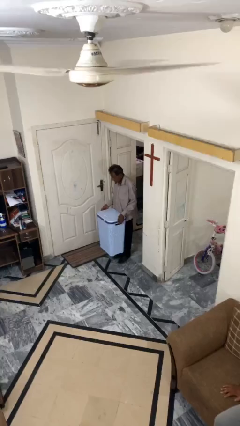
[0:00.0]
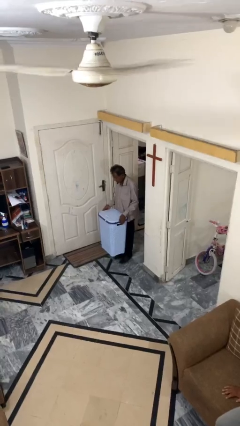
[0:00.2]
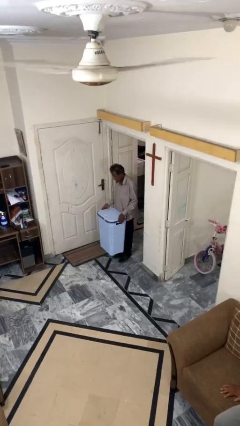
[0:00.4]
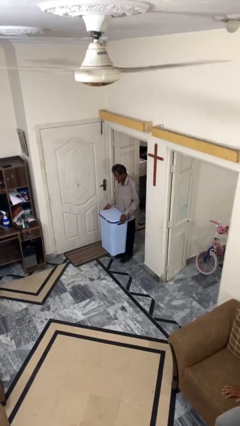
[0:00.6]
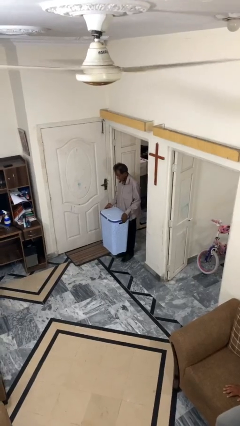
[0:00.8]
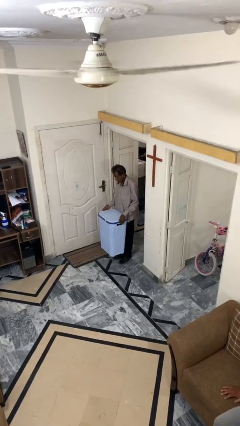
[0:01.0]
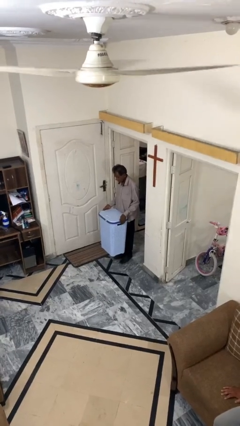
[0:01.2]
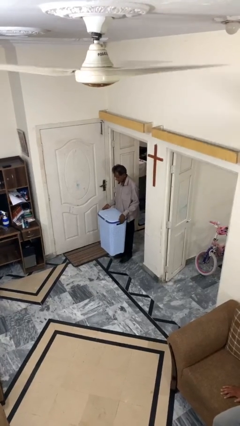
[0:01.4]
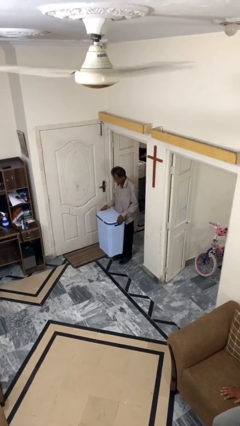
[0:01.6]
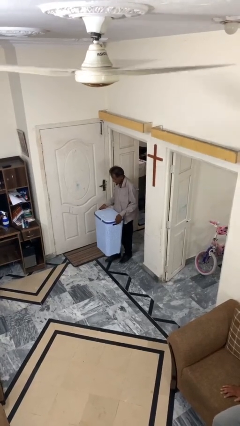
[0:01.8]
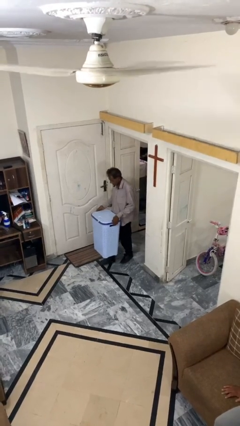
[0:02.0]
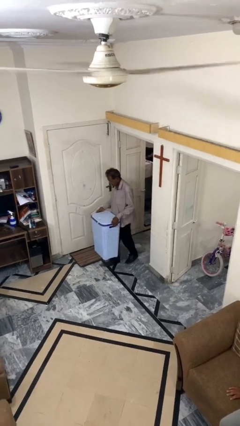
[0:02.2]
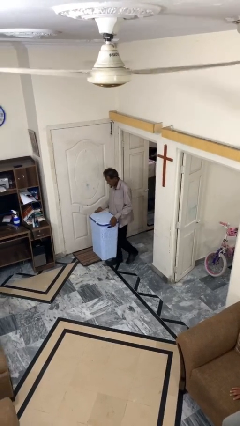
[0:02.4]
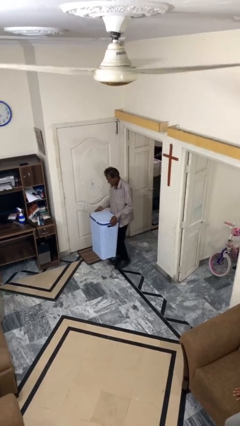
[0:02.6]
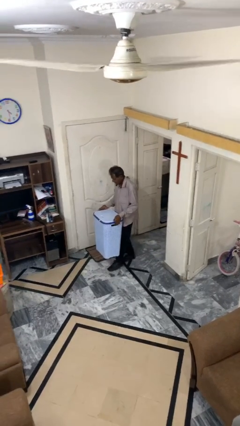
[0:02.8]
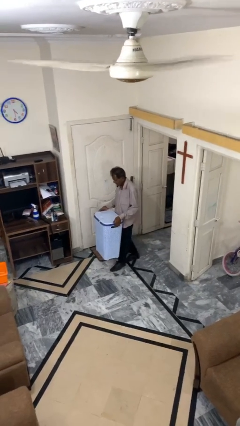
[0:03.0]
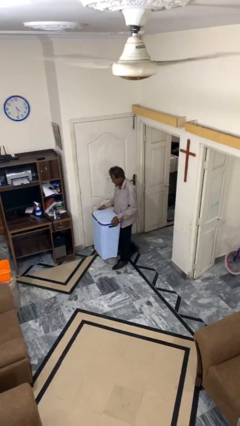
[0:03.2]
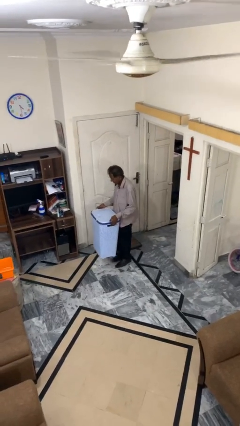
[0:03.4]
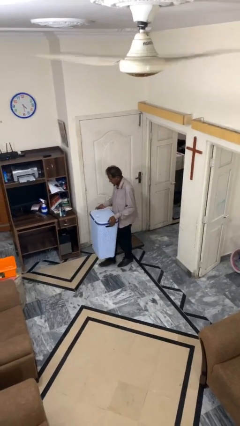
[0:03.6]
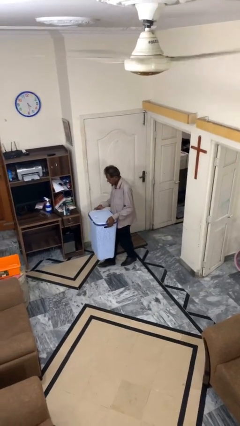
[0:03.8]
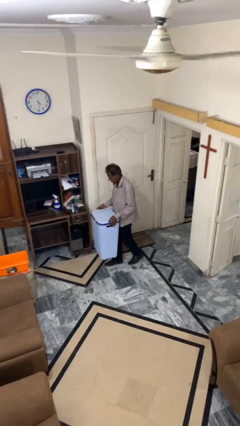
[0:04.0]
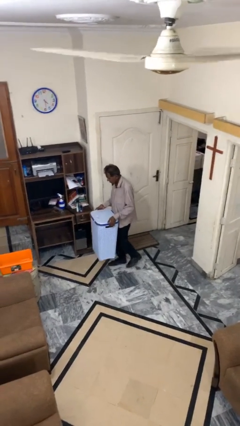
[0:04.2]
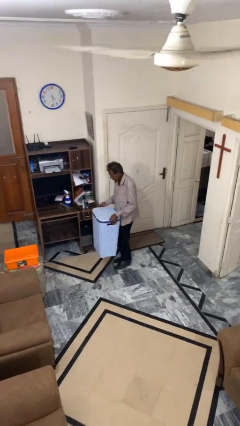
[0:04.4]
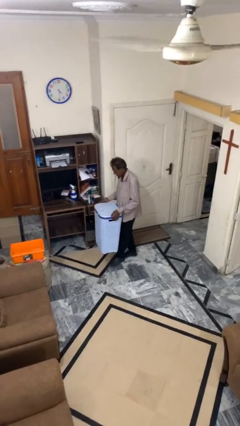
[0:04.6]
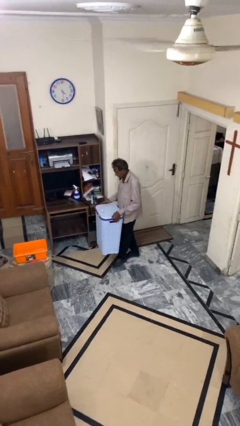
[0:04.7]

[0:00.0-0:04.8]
person carries heavy object

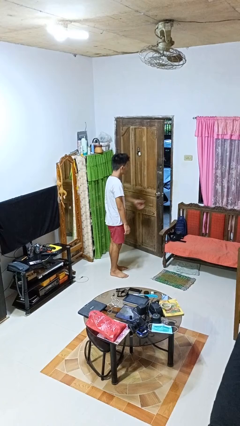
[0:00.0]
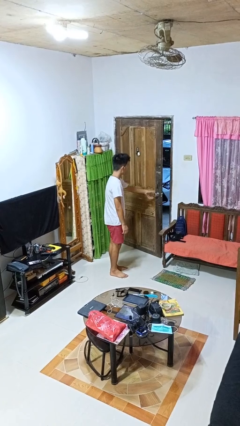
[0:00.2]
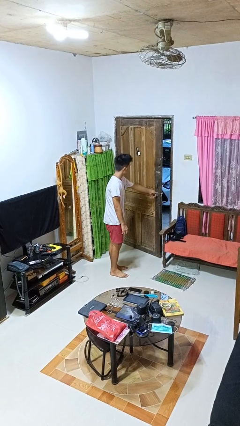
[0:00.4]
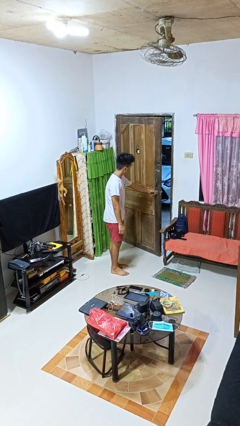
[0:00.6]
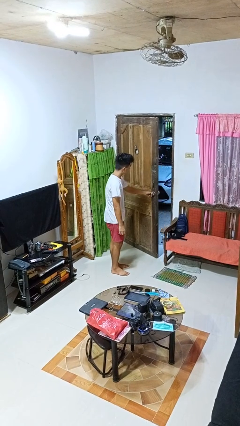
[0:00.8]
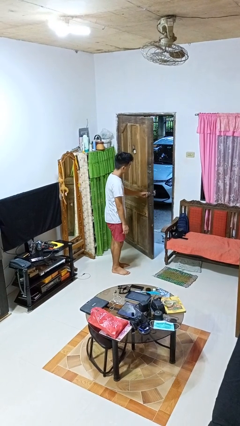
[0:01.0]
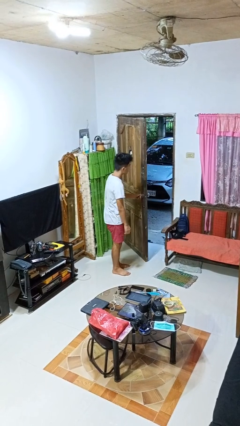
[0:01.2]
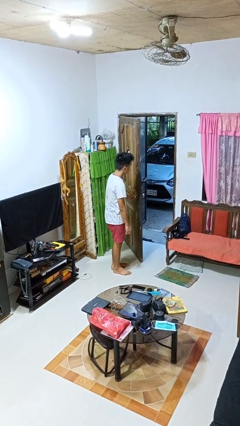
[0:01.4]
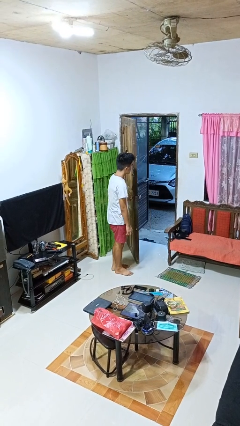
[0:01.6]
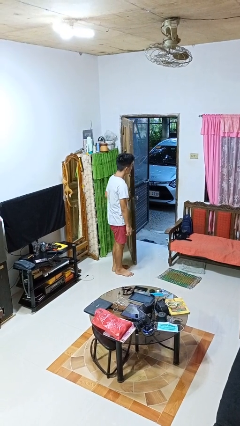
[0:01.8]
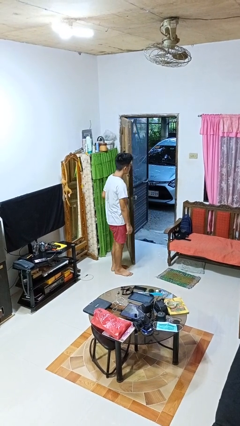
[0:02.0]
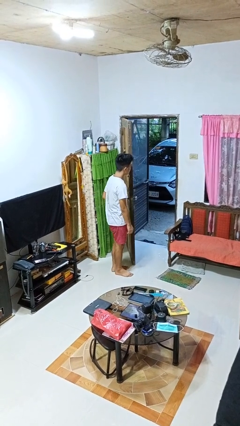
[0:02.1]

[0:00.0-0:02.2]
person opens facility door

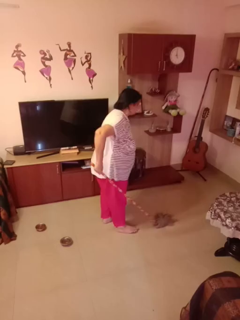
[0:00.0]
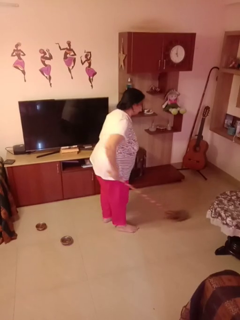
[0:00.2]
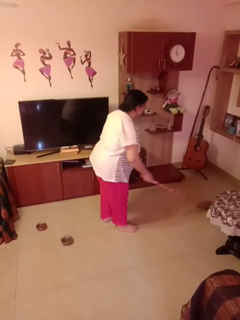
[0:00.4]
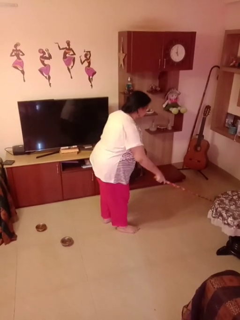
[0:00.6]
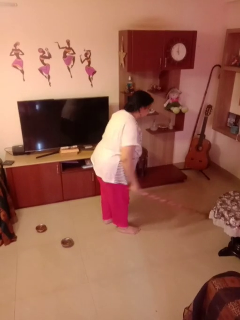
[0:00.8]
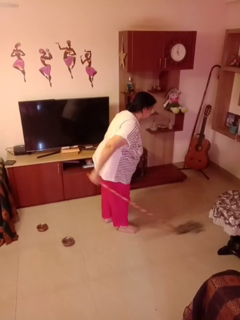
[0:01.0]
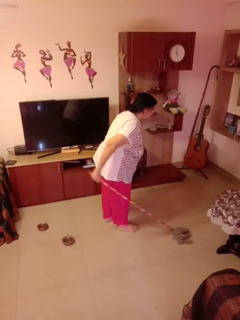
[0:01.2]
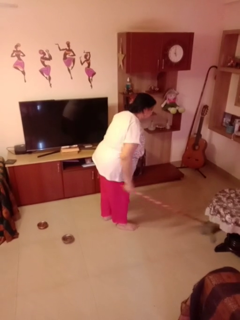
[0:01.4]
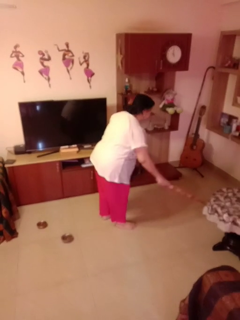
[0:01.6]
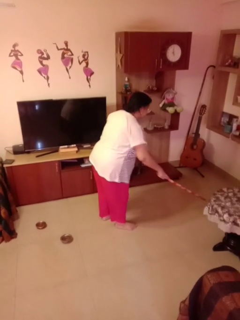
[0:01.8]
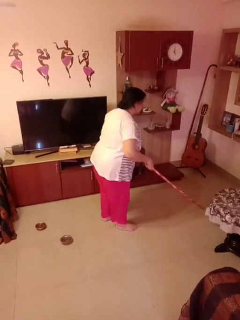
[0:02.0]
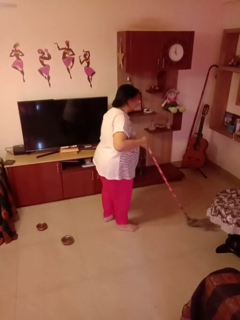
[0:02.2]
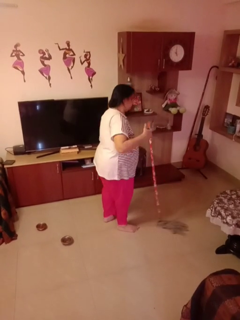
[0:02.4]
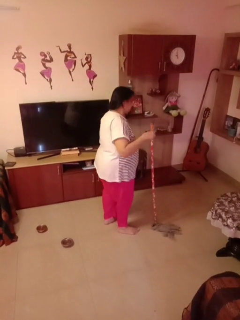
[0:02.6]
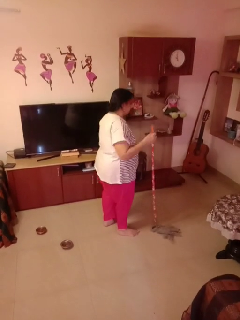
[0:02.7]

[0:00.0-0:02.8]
person mops

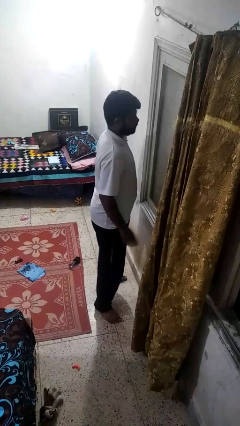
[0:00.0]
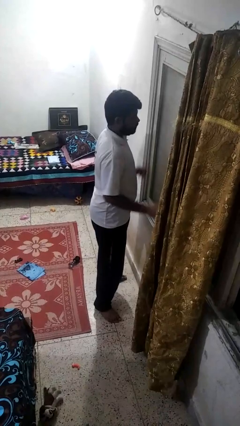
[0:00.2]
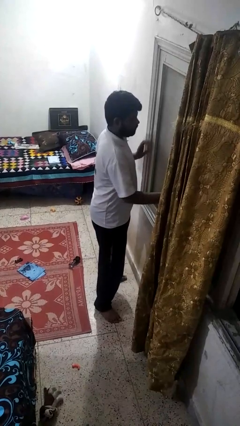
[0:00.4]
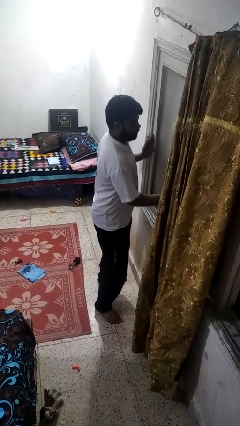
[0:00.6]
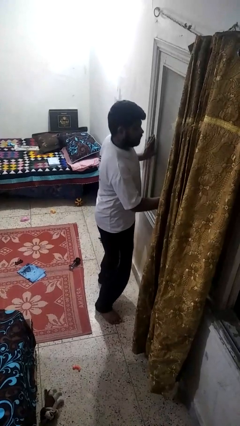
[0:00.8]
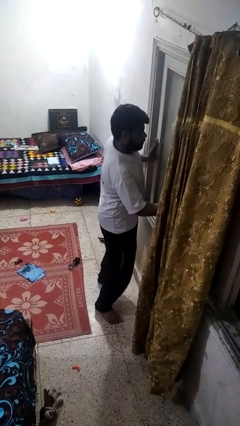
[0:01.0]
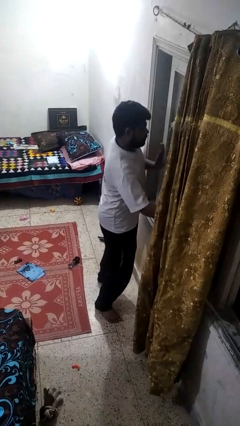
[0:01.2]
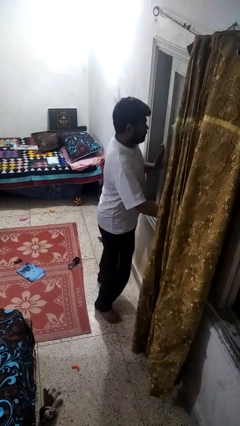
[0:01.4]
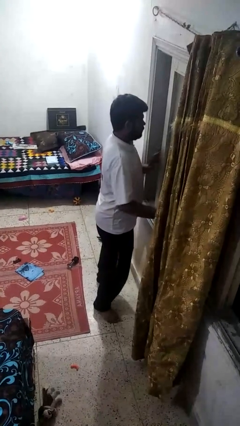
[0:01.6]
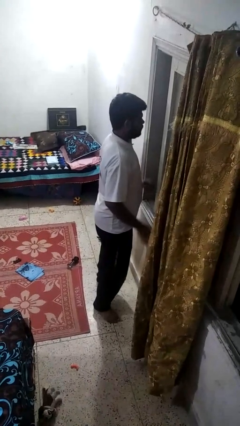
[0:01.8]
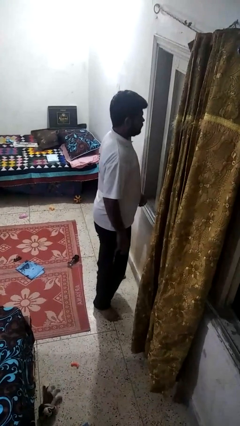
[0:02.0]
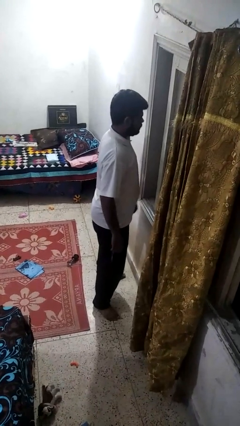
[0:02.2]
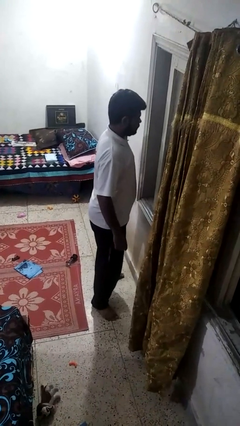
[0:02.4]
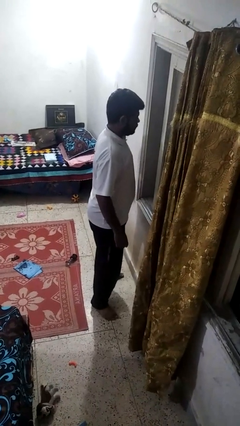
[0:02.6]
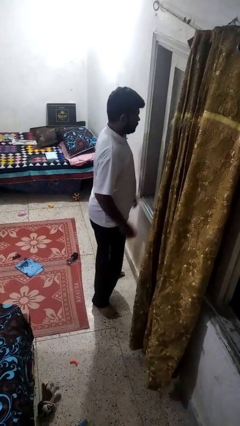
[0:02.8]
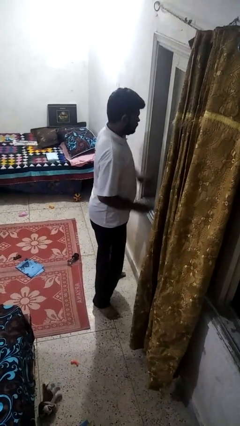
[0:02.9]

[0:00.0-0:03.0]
person opens sliding door

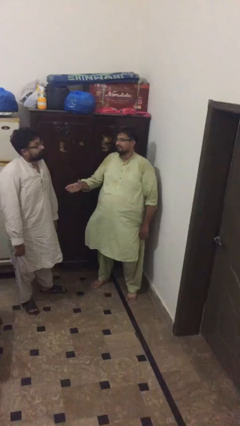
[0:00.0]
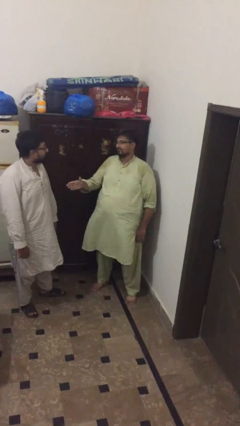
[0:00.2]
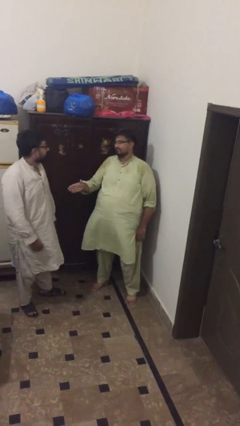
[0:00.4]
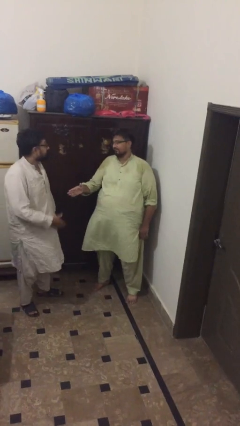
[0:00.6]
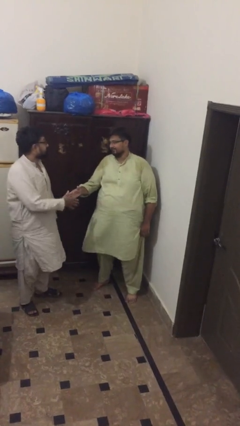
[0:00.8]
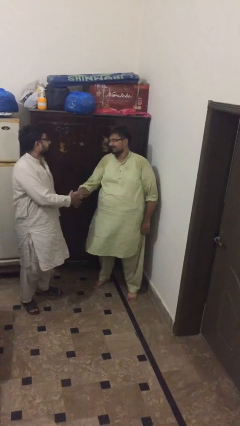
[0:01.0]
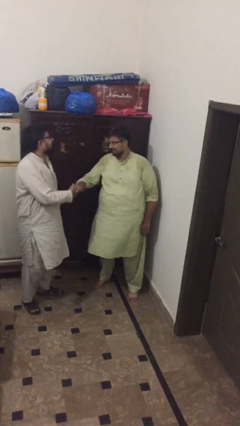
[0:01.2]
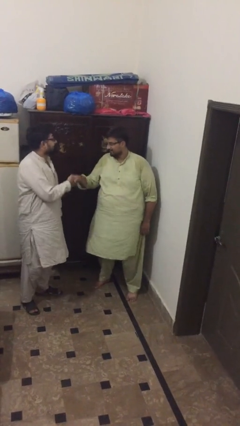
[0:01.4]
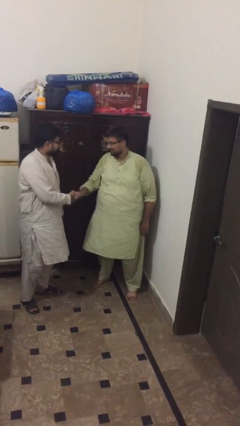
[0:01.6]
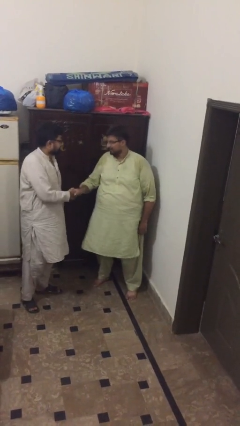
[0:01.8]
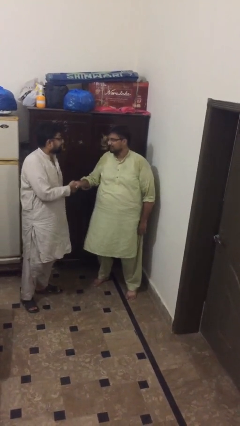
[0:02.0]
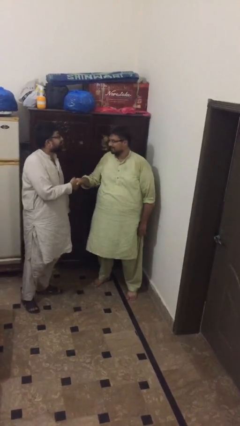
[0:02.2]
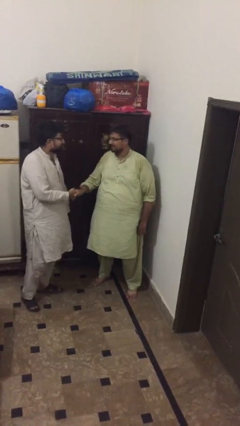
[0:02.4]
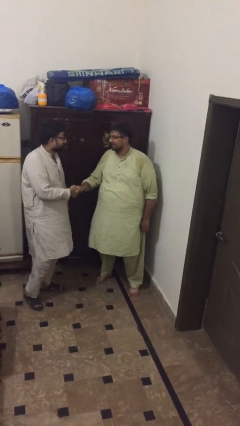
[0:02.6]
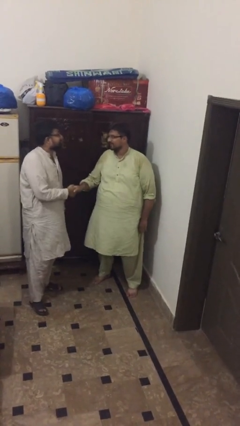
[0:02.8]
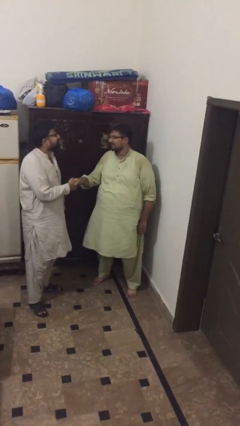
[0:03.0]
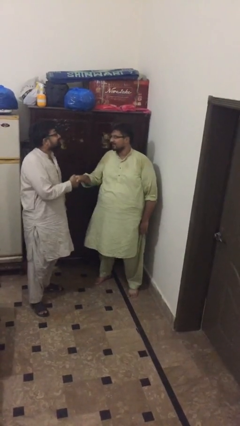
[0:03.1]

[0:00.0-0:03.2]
person shakes hand

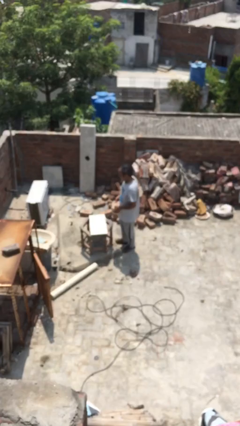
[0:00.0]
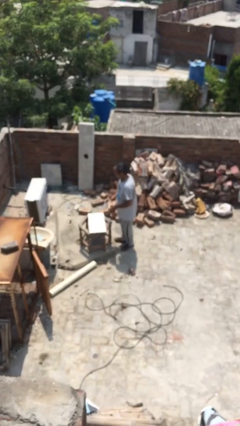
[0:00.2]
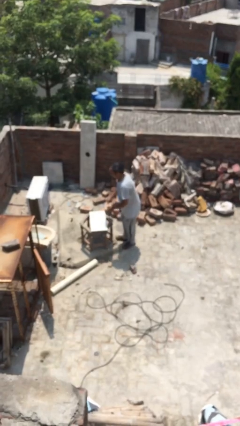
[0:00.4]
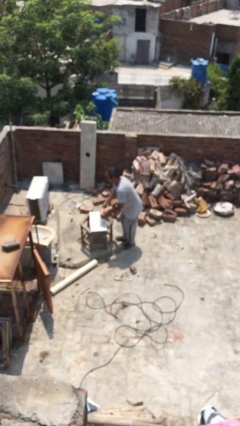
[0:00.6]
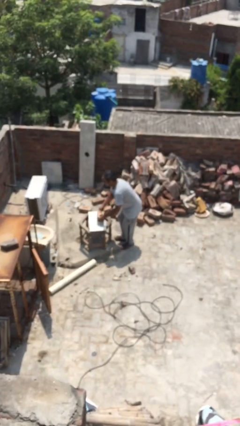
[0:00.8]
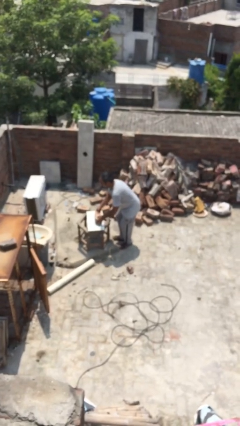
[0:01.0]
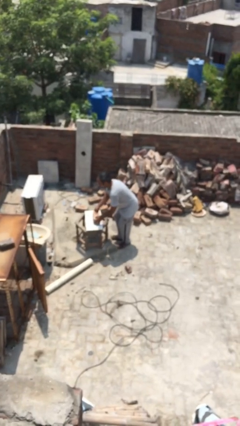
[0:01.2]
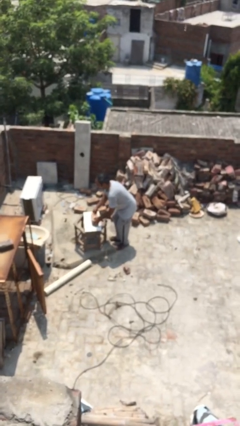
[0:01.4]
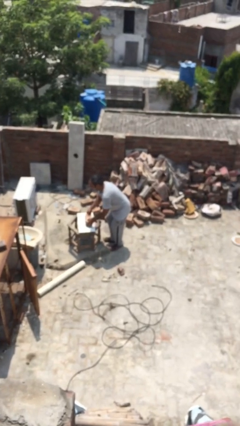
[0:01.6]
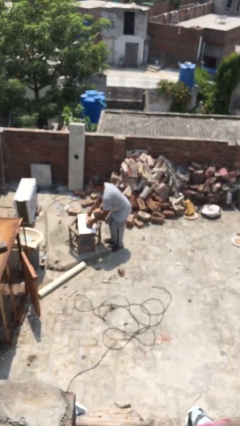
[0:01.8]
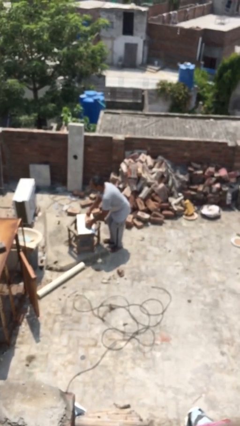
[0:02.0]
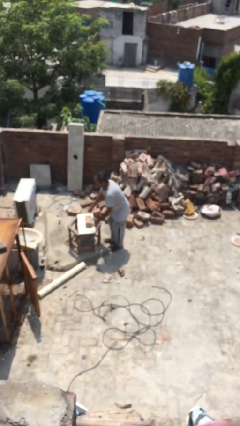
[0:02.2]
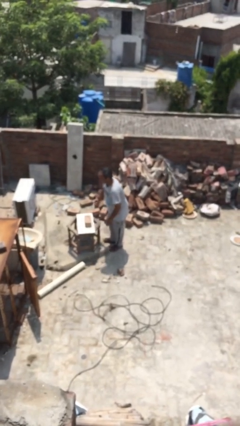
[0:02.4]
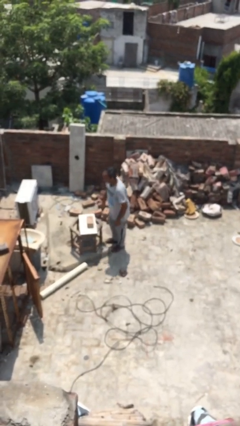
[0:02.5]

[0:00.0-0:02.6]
person puts down object on table
